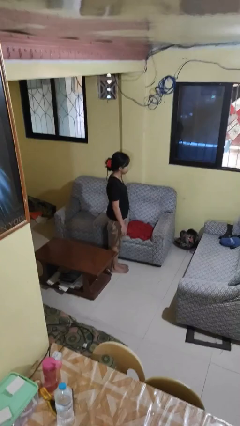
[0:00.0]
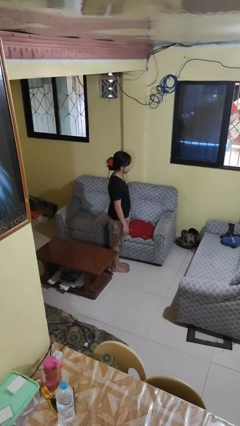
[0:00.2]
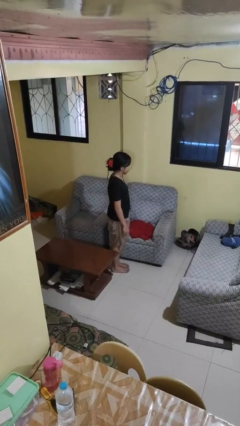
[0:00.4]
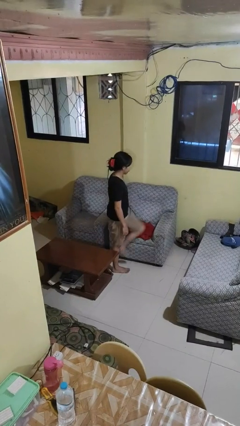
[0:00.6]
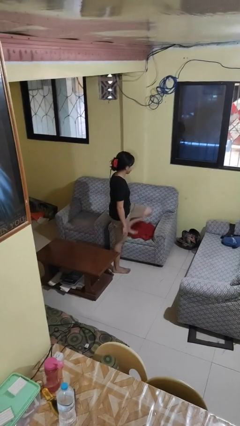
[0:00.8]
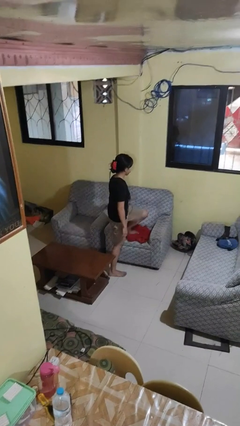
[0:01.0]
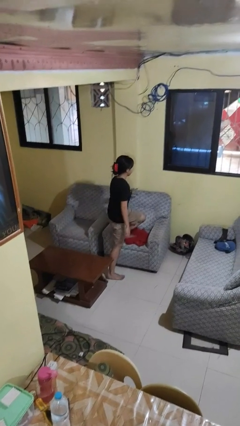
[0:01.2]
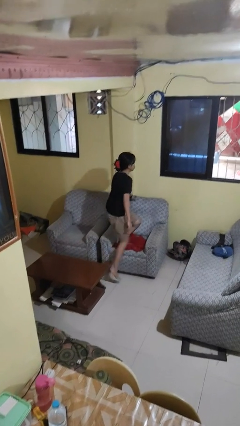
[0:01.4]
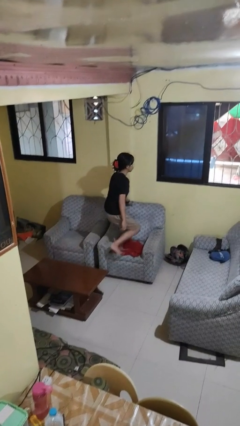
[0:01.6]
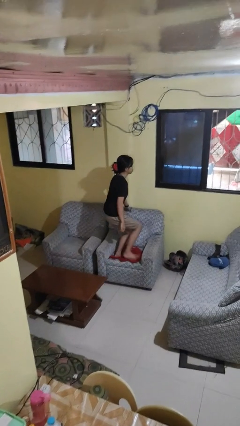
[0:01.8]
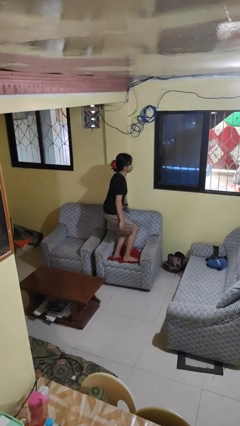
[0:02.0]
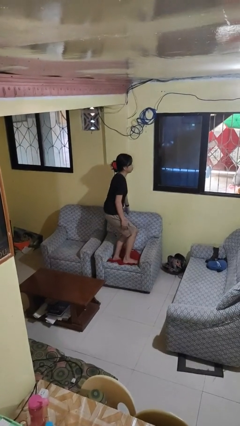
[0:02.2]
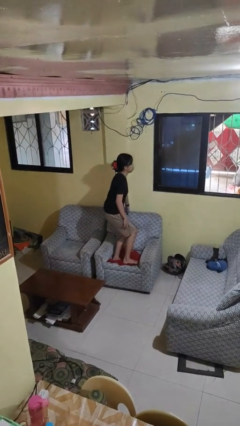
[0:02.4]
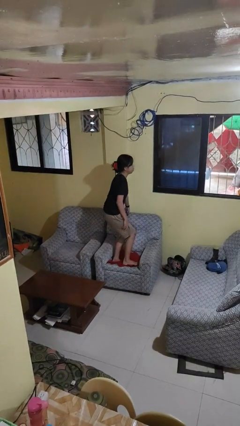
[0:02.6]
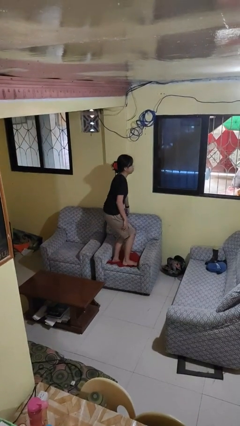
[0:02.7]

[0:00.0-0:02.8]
person climbs on couch

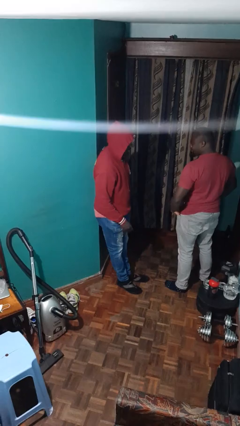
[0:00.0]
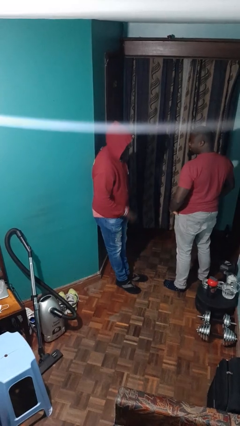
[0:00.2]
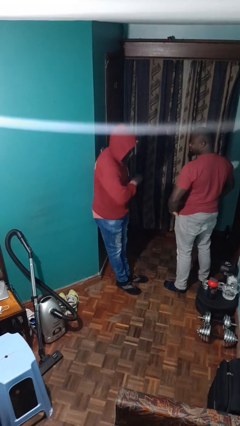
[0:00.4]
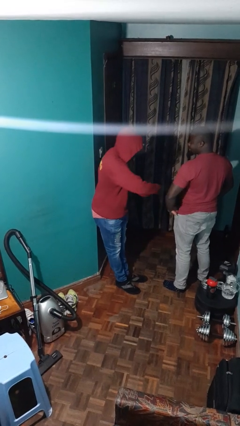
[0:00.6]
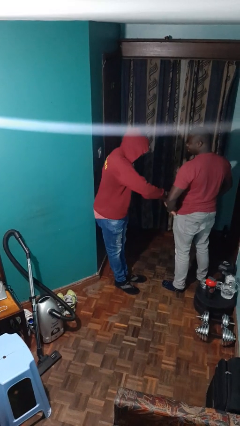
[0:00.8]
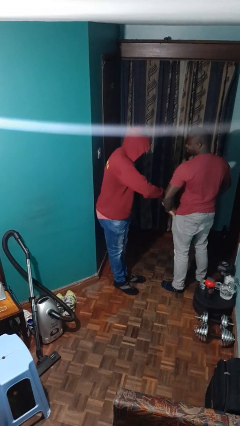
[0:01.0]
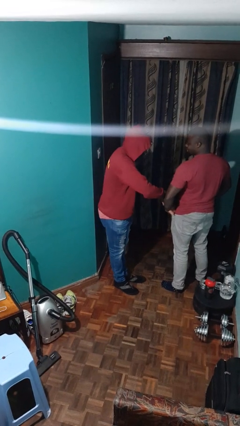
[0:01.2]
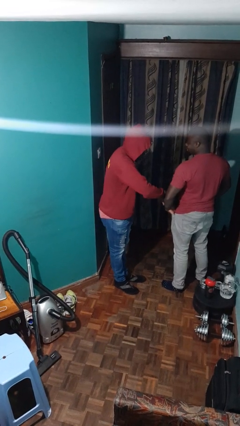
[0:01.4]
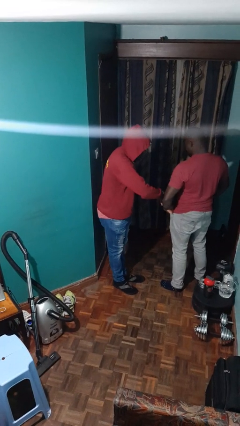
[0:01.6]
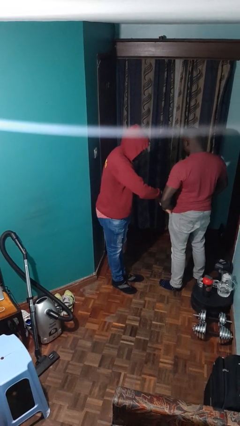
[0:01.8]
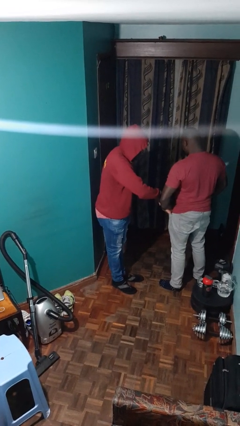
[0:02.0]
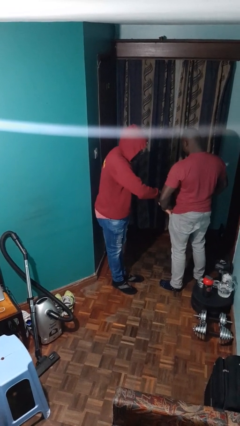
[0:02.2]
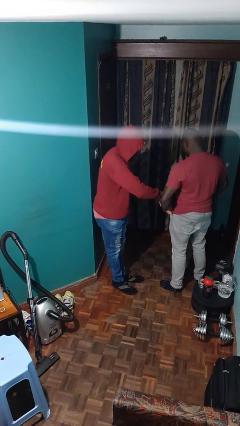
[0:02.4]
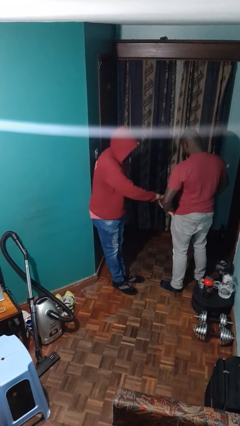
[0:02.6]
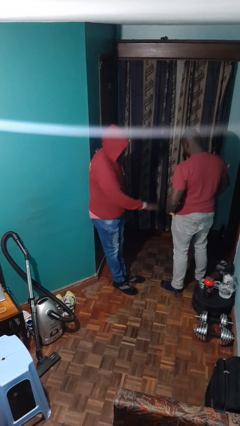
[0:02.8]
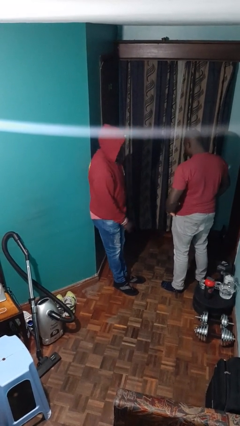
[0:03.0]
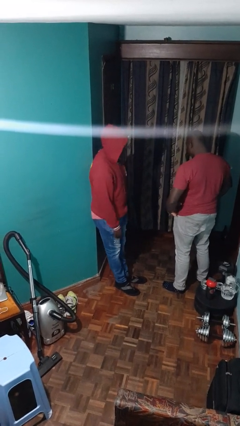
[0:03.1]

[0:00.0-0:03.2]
person grabs person by forearm

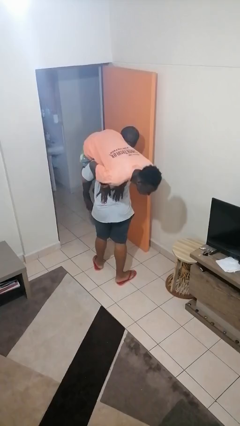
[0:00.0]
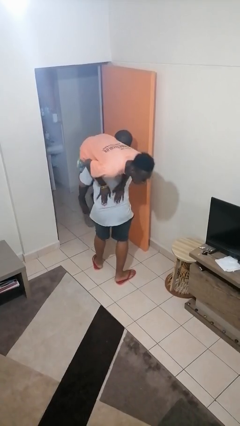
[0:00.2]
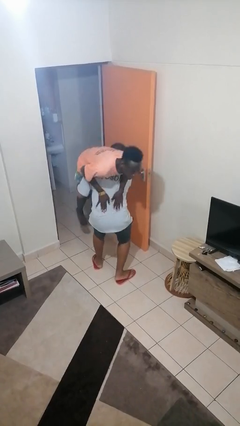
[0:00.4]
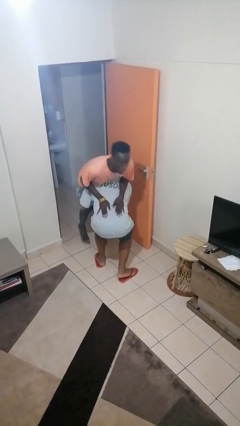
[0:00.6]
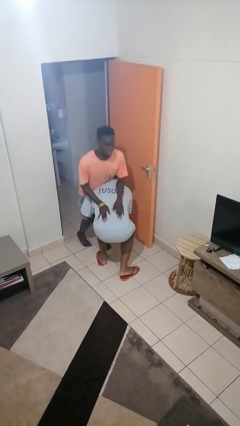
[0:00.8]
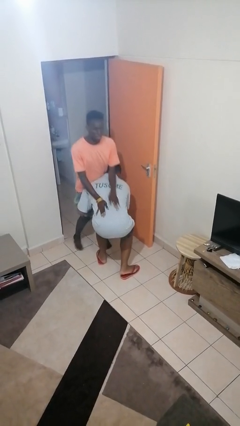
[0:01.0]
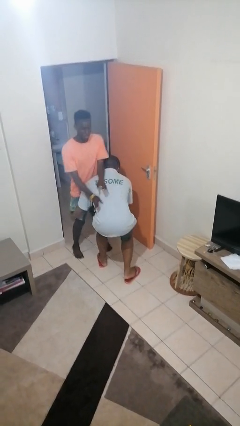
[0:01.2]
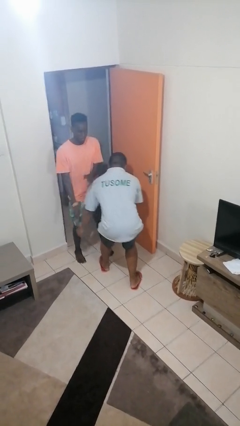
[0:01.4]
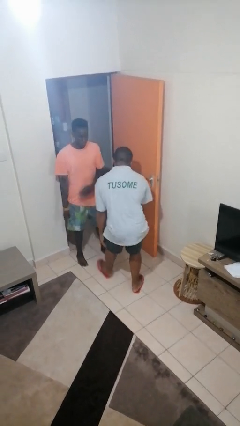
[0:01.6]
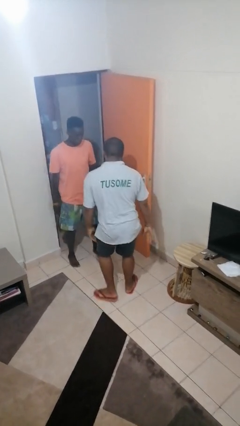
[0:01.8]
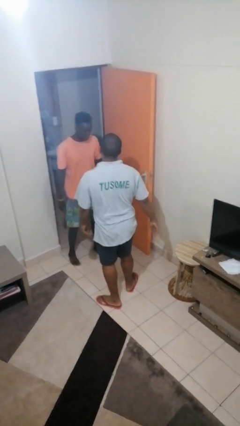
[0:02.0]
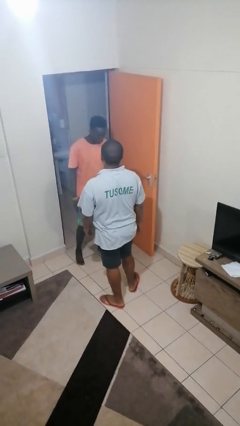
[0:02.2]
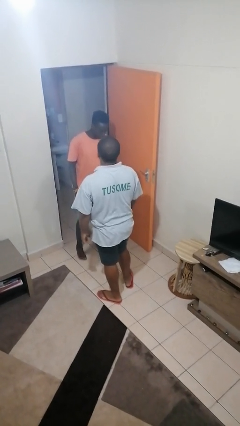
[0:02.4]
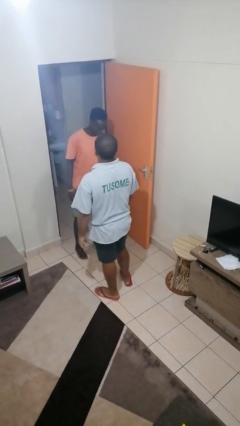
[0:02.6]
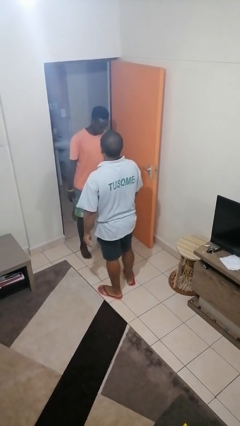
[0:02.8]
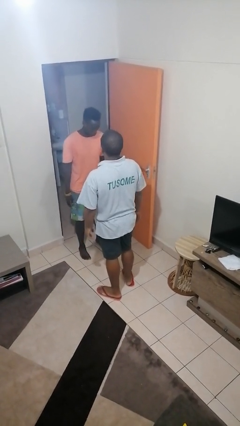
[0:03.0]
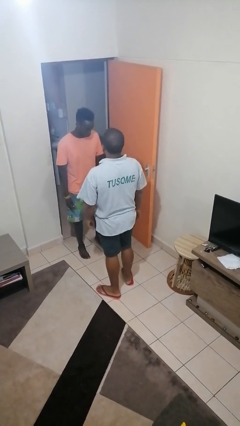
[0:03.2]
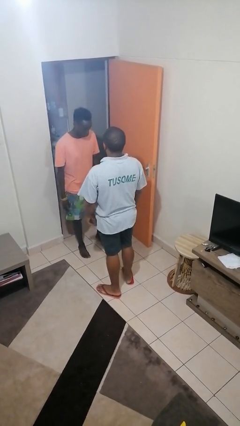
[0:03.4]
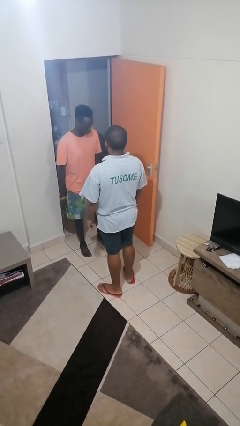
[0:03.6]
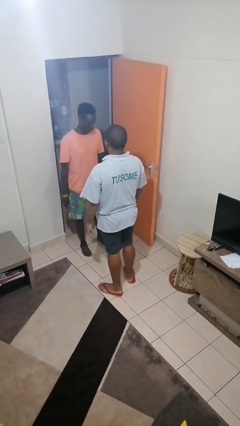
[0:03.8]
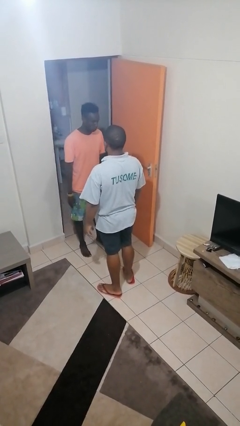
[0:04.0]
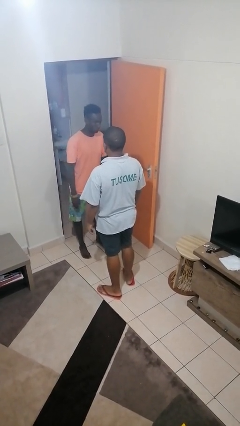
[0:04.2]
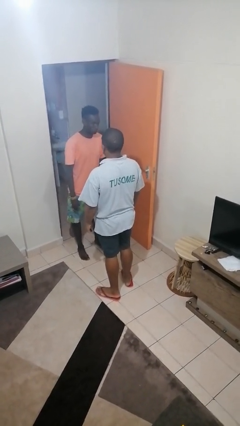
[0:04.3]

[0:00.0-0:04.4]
person puts down person

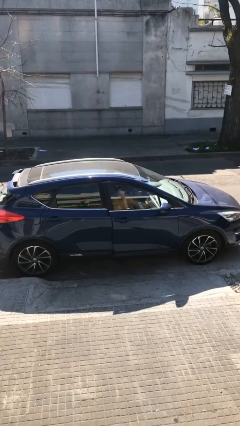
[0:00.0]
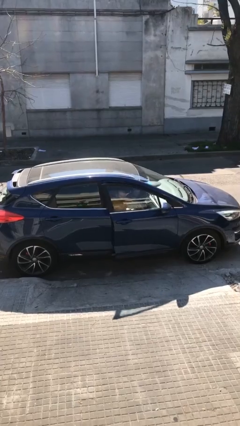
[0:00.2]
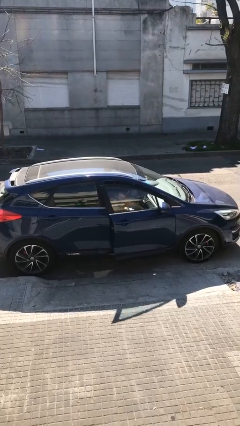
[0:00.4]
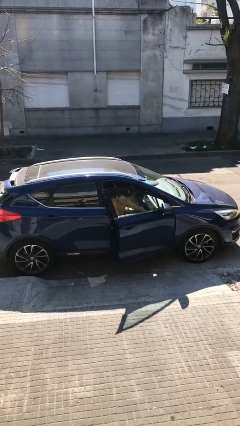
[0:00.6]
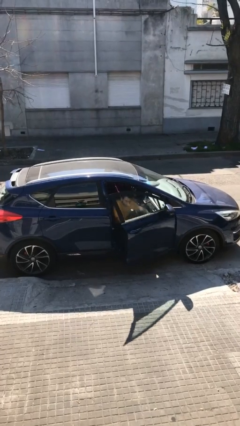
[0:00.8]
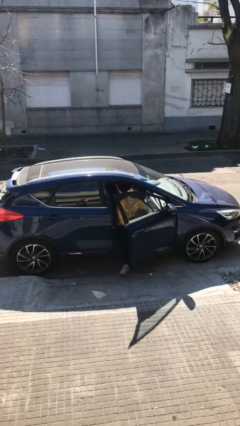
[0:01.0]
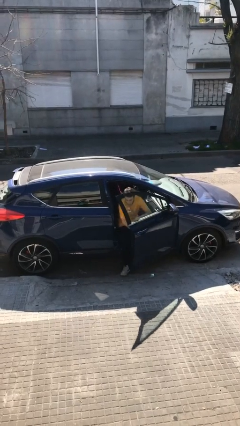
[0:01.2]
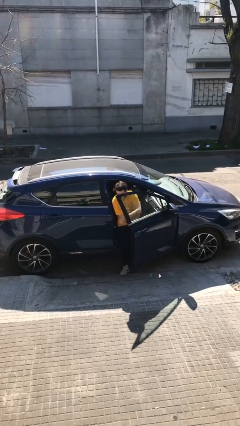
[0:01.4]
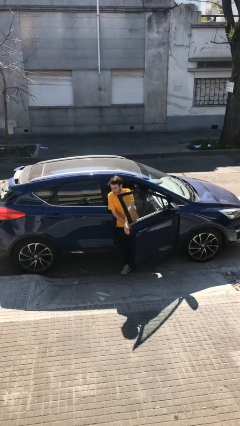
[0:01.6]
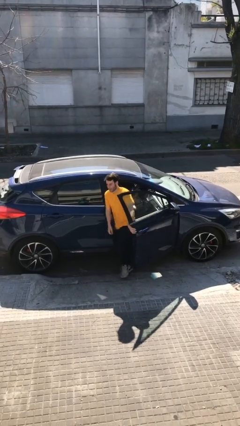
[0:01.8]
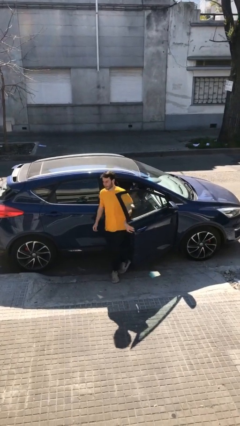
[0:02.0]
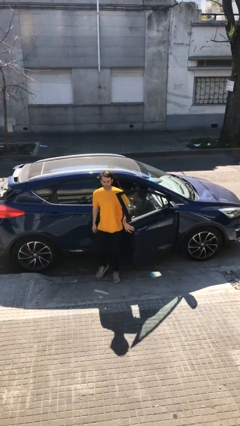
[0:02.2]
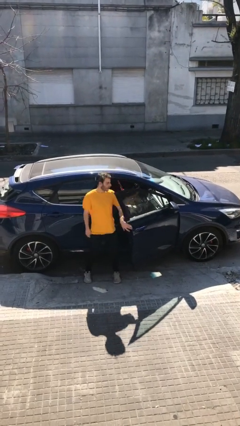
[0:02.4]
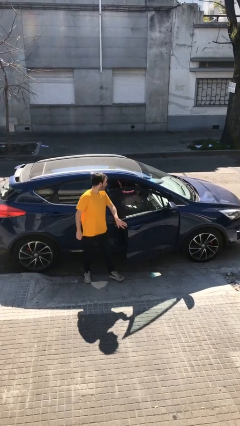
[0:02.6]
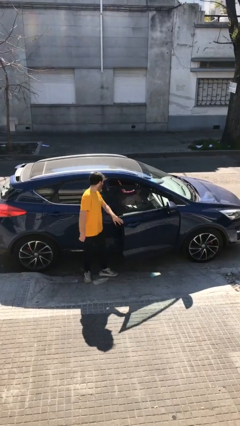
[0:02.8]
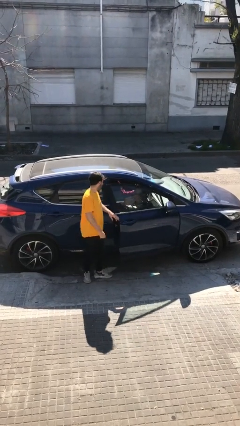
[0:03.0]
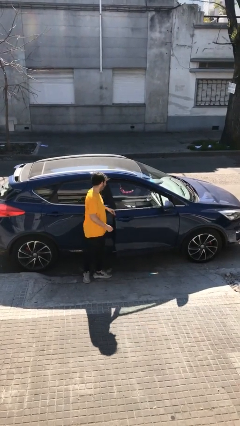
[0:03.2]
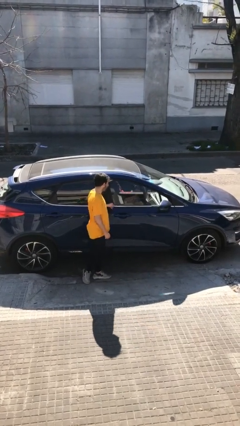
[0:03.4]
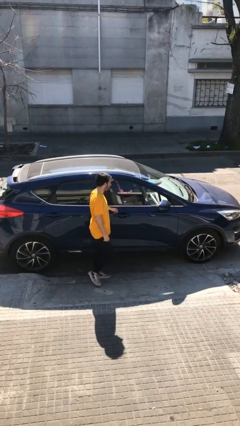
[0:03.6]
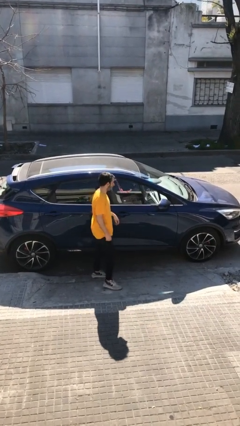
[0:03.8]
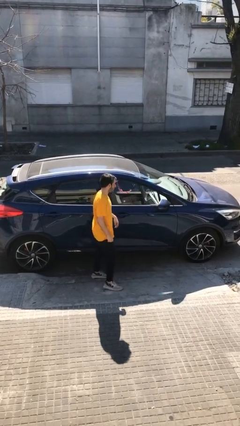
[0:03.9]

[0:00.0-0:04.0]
car drops off person

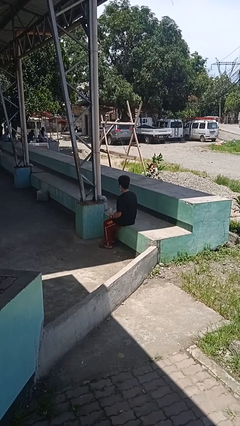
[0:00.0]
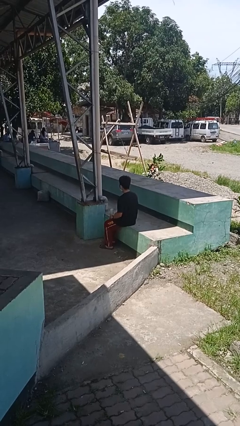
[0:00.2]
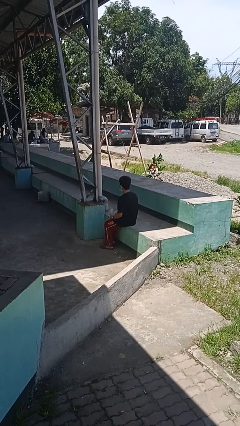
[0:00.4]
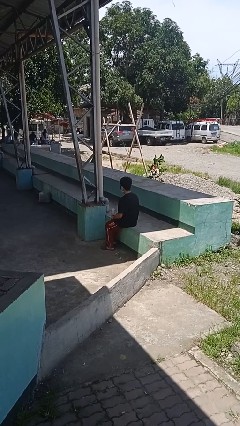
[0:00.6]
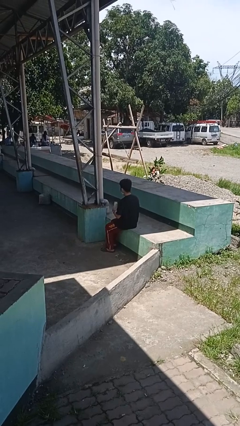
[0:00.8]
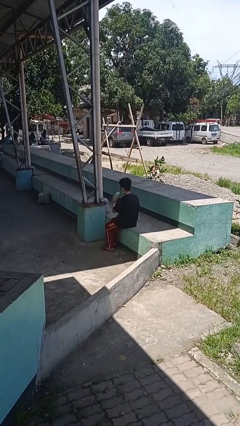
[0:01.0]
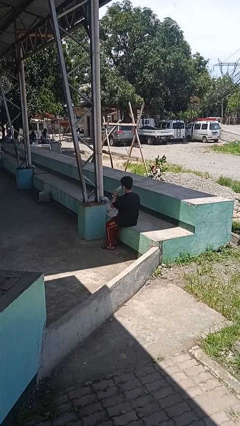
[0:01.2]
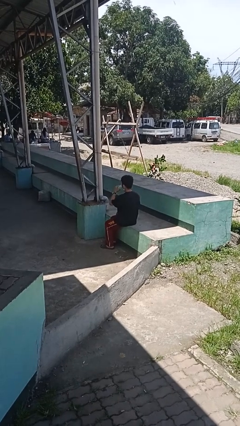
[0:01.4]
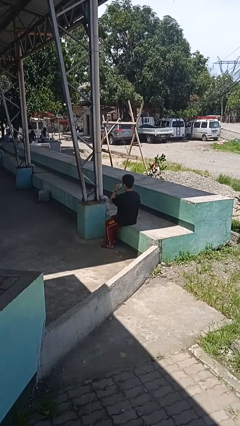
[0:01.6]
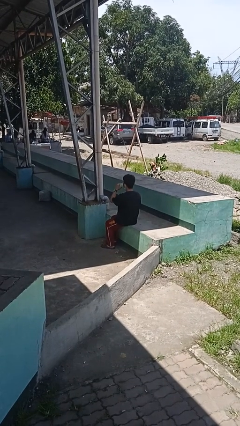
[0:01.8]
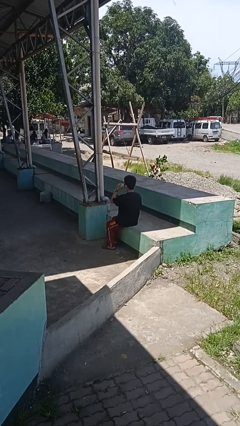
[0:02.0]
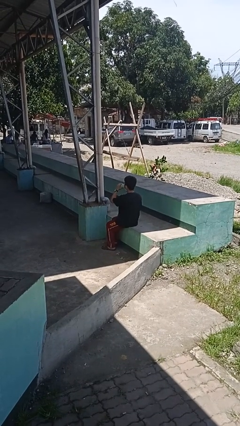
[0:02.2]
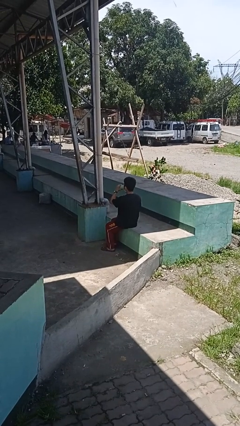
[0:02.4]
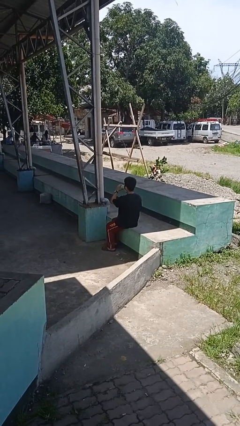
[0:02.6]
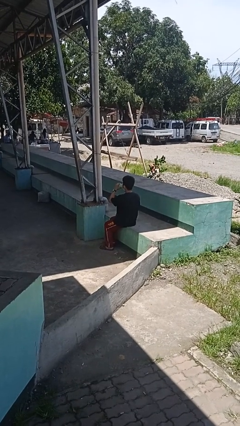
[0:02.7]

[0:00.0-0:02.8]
person drinks from bottle

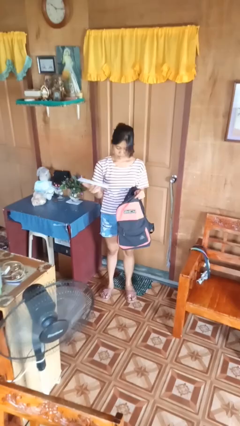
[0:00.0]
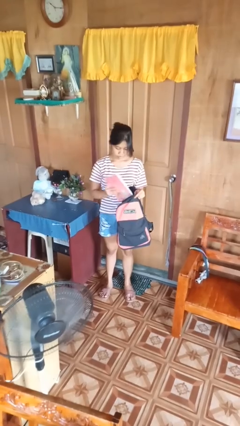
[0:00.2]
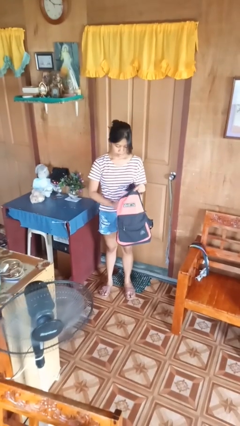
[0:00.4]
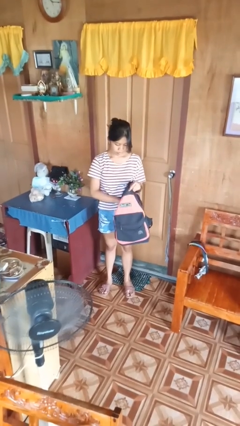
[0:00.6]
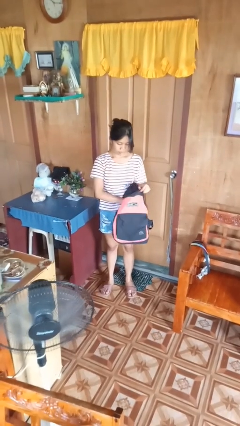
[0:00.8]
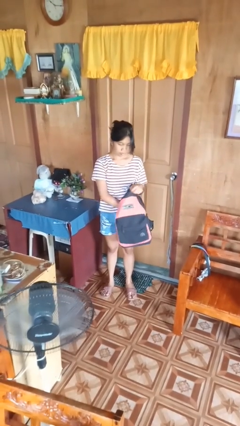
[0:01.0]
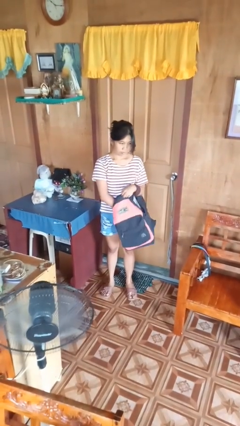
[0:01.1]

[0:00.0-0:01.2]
person puts object into backpack
